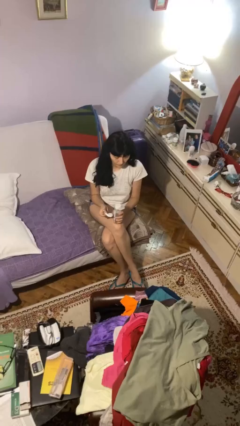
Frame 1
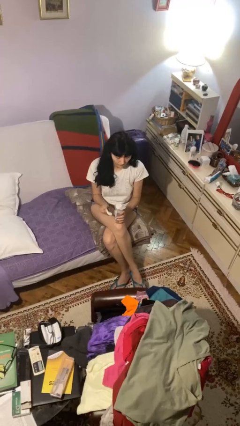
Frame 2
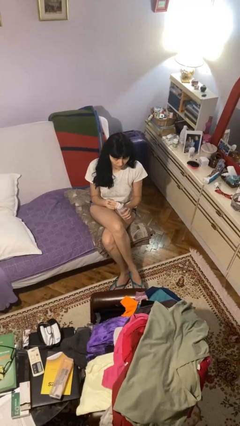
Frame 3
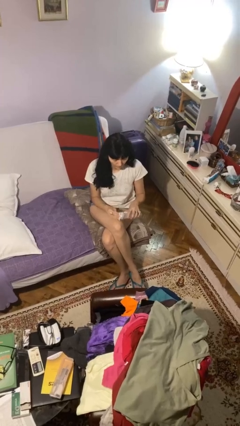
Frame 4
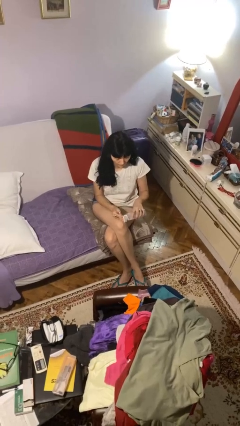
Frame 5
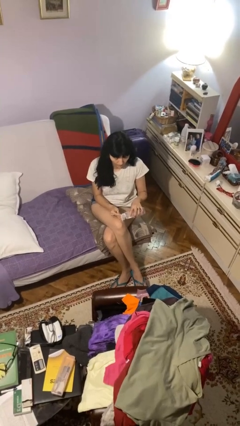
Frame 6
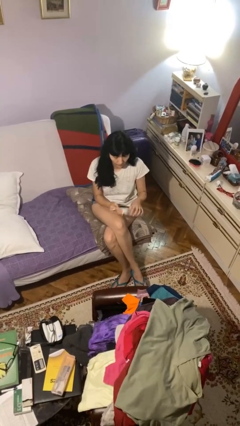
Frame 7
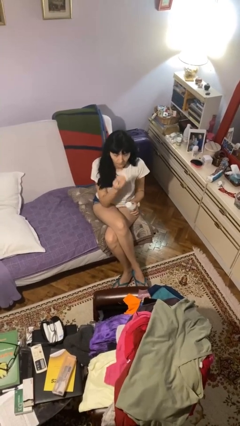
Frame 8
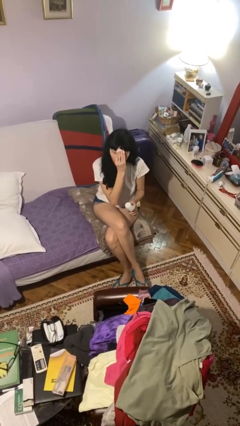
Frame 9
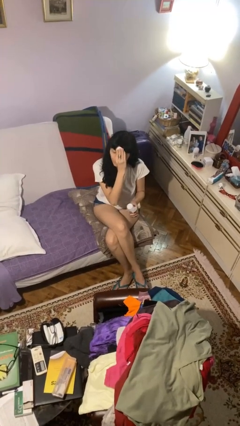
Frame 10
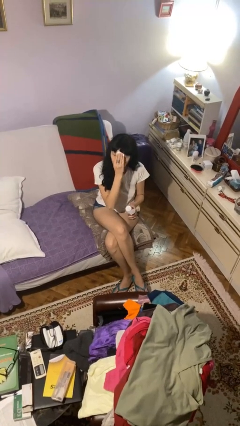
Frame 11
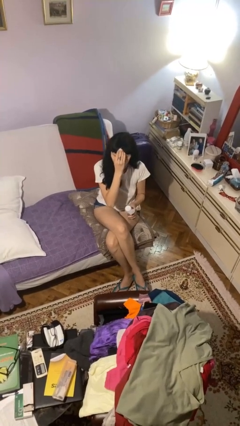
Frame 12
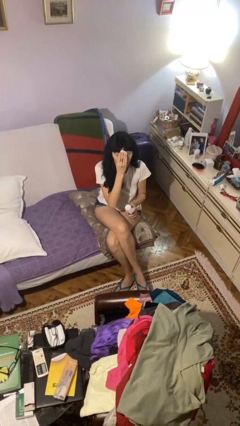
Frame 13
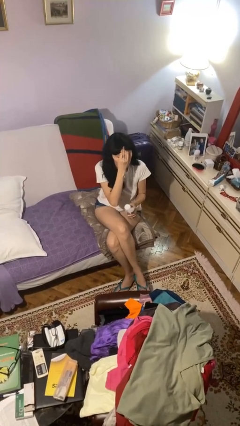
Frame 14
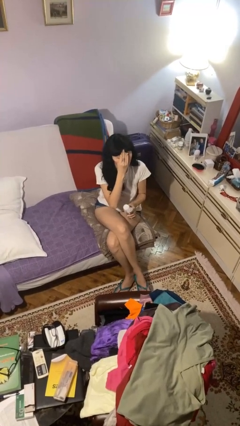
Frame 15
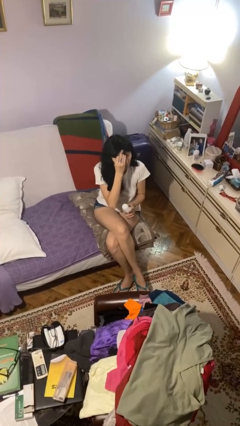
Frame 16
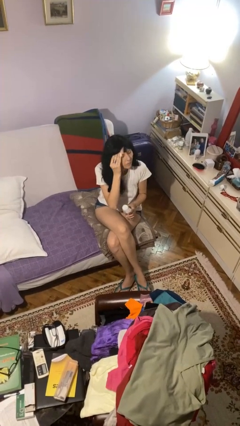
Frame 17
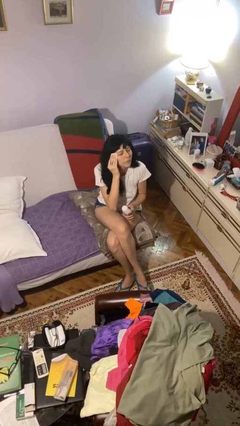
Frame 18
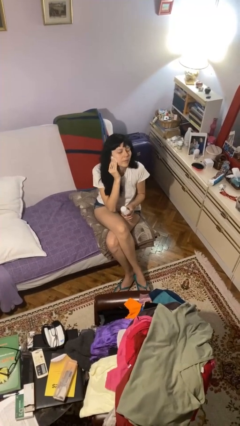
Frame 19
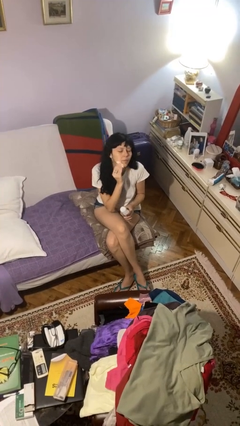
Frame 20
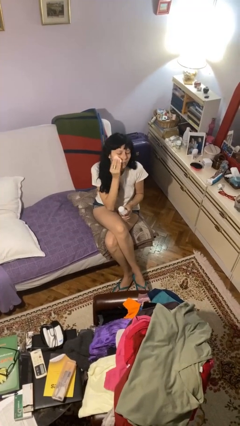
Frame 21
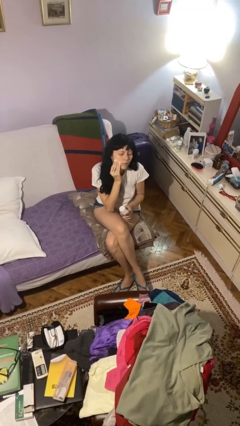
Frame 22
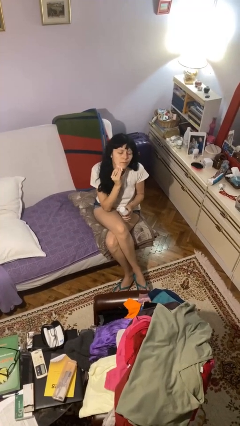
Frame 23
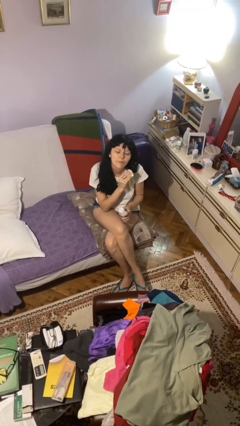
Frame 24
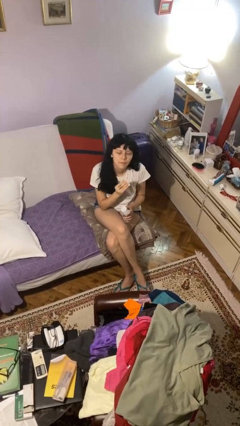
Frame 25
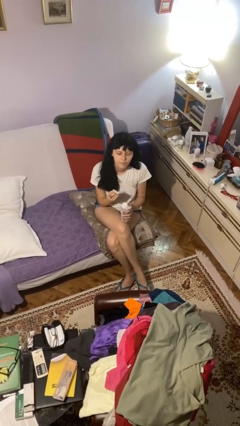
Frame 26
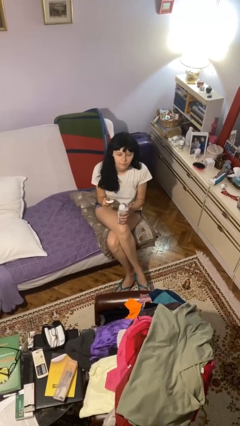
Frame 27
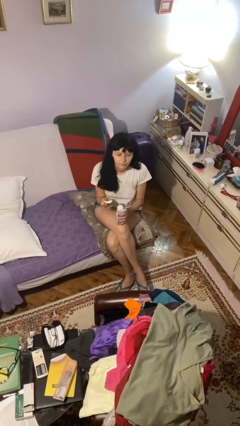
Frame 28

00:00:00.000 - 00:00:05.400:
person applies facial moisturizer

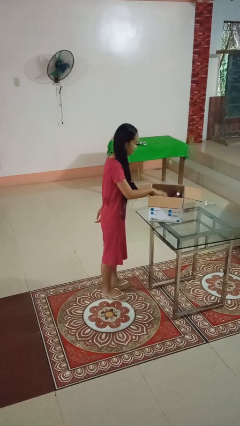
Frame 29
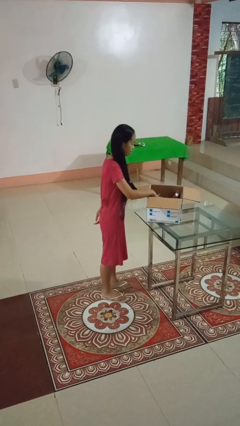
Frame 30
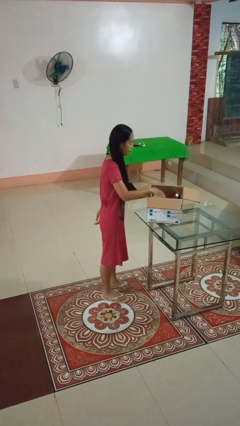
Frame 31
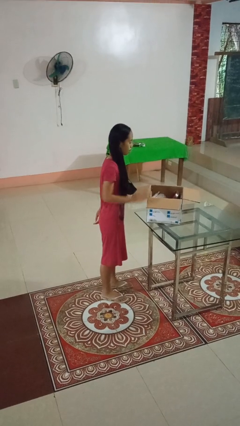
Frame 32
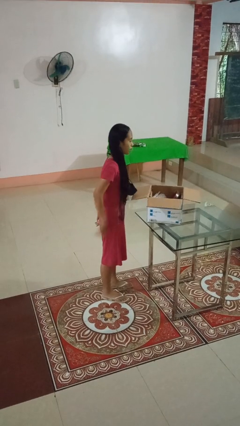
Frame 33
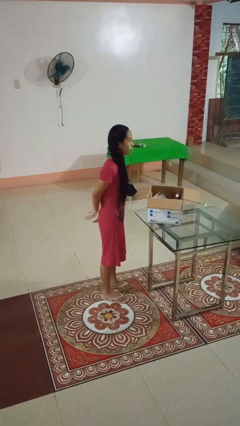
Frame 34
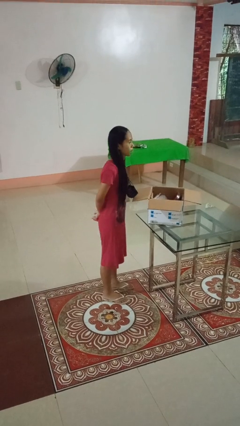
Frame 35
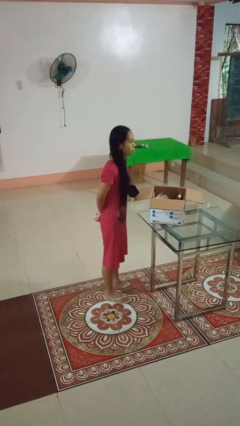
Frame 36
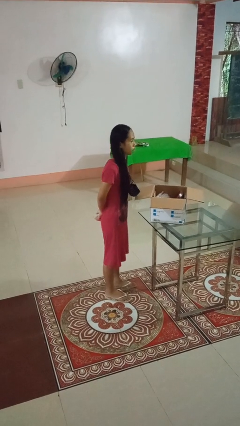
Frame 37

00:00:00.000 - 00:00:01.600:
person puts object into box

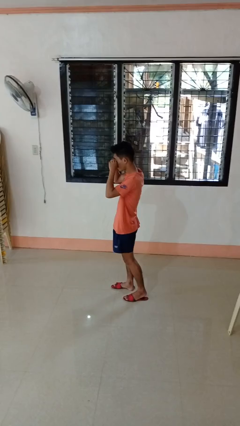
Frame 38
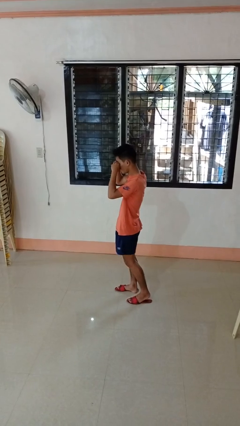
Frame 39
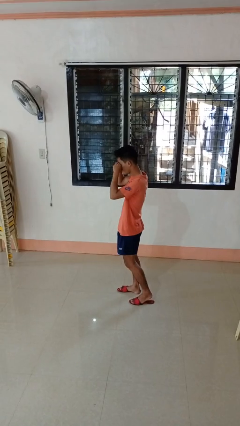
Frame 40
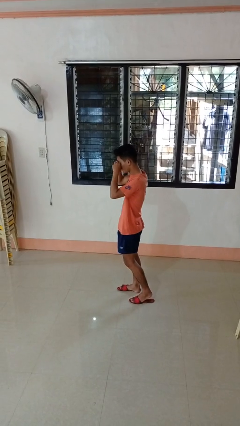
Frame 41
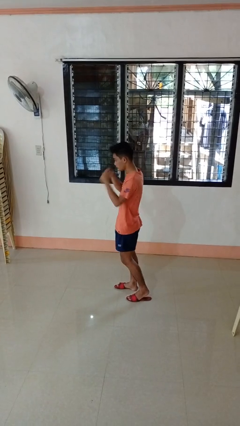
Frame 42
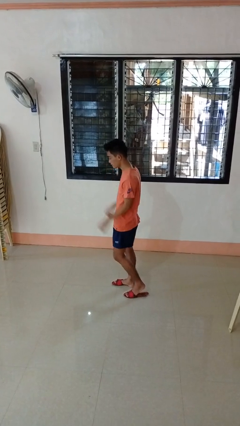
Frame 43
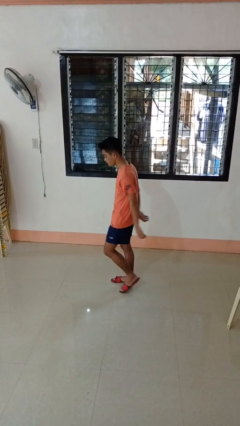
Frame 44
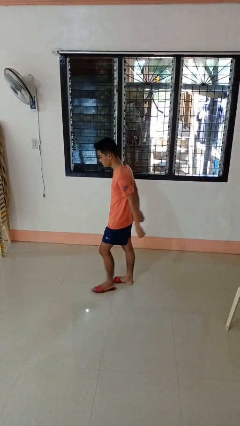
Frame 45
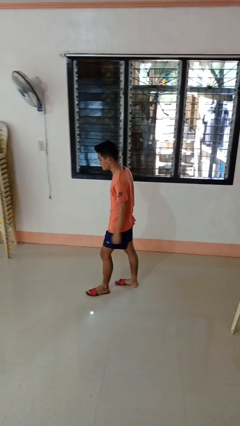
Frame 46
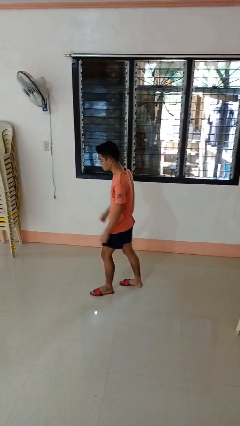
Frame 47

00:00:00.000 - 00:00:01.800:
person rubs eyes

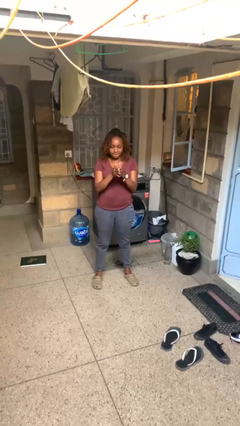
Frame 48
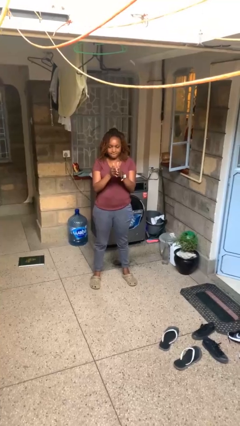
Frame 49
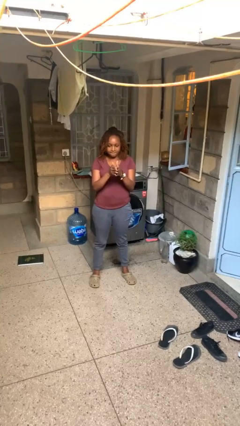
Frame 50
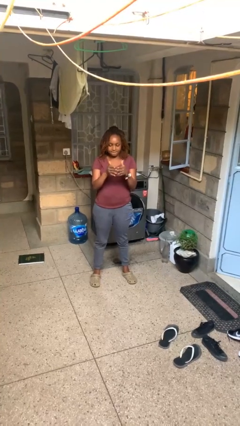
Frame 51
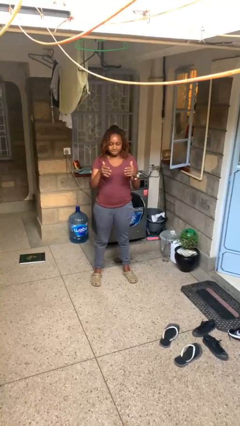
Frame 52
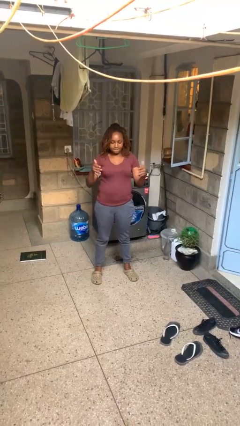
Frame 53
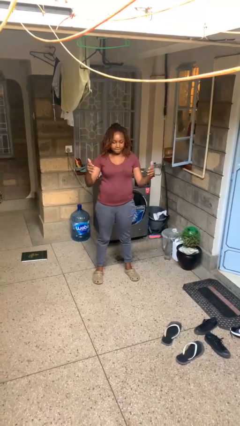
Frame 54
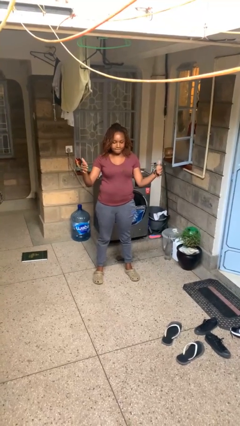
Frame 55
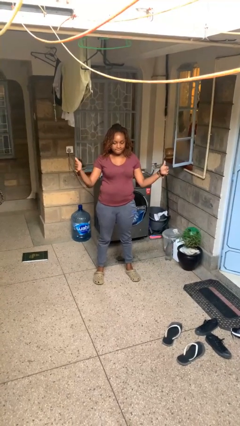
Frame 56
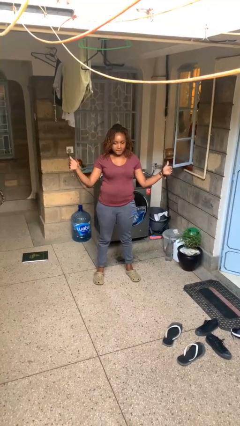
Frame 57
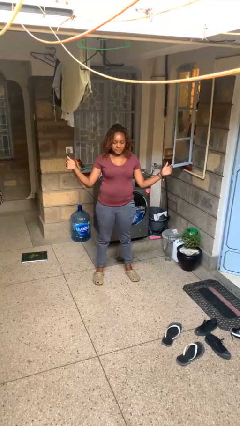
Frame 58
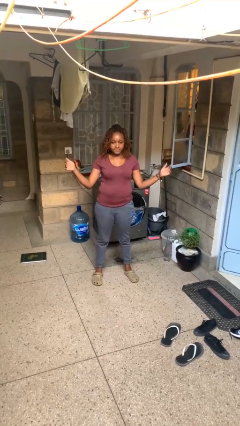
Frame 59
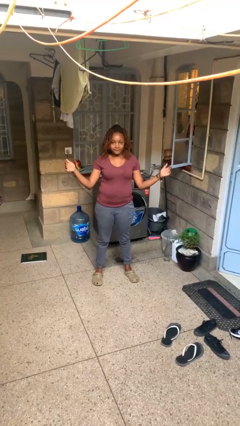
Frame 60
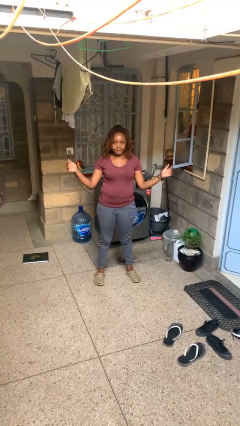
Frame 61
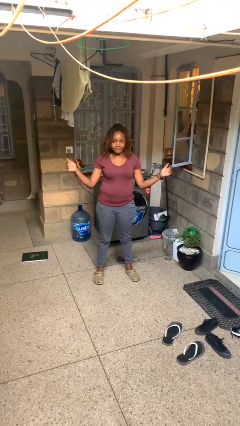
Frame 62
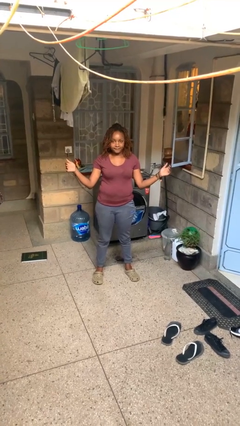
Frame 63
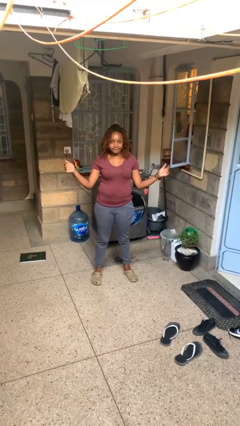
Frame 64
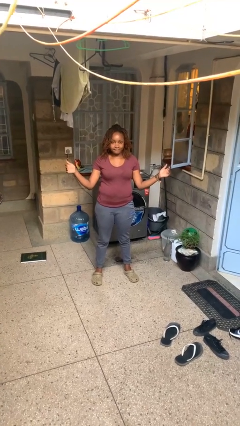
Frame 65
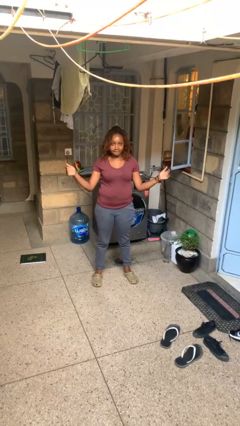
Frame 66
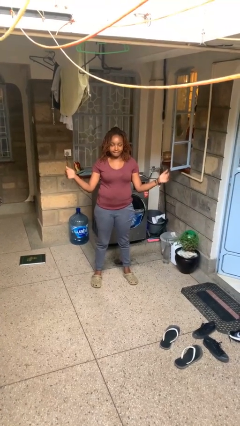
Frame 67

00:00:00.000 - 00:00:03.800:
person gestures zoom out

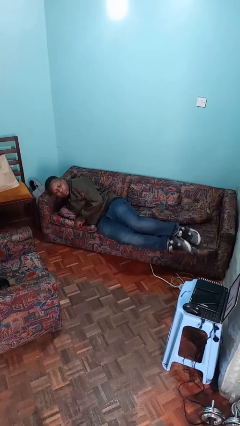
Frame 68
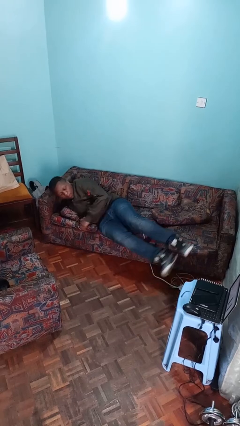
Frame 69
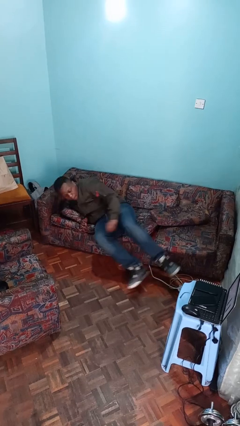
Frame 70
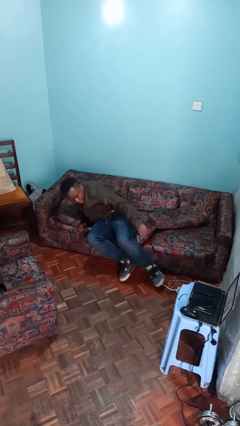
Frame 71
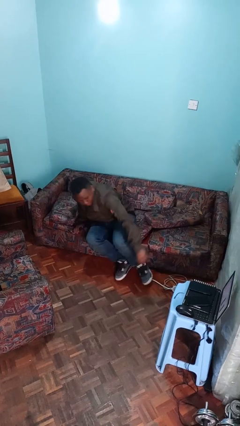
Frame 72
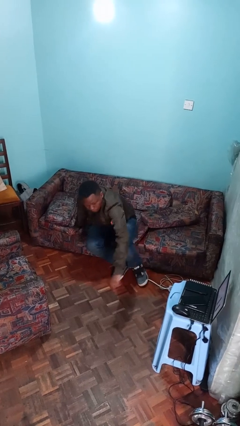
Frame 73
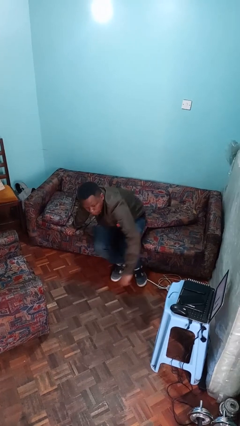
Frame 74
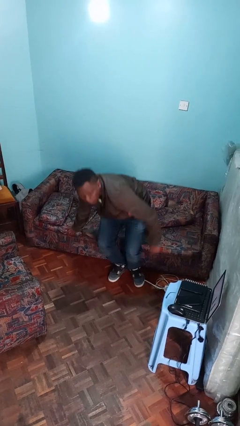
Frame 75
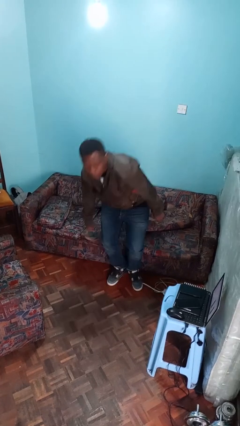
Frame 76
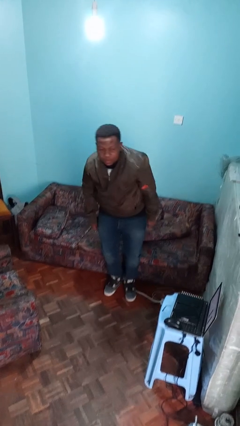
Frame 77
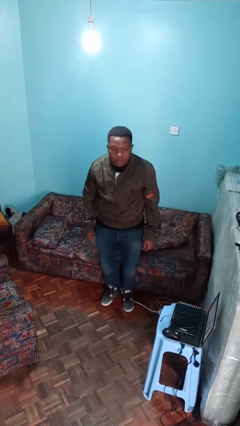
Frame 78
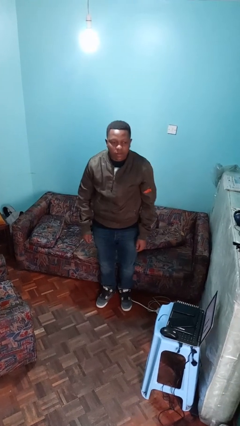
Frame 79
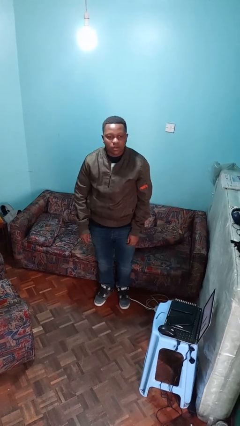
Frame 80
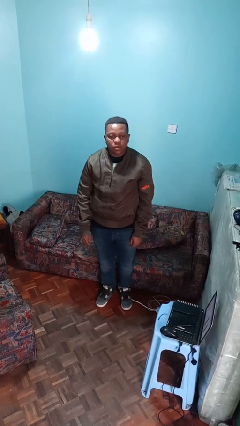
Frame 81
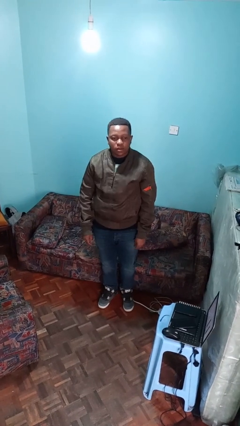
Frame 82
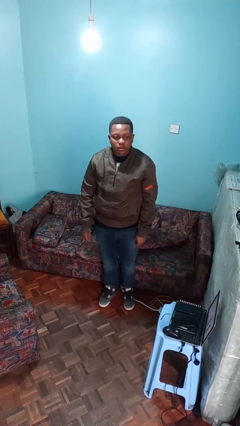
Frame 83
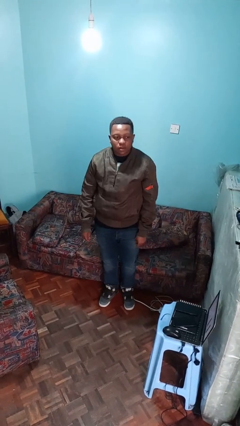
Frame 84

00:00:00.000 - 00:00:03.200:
person stands up

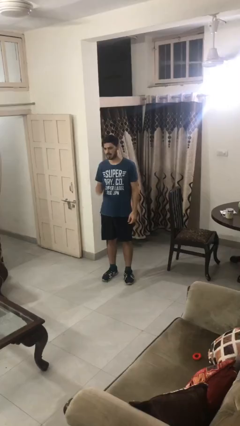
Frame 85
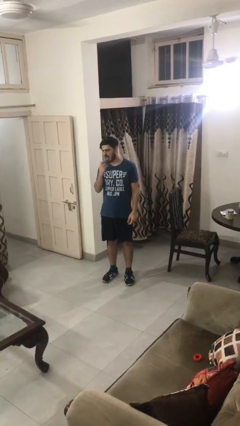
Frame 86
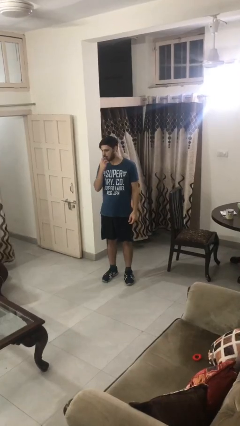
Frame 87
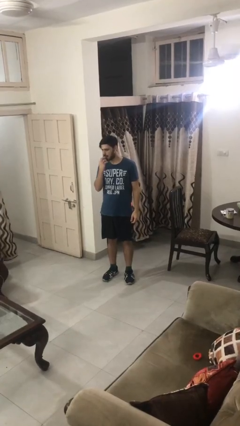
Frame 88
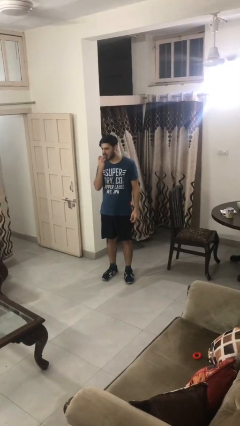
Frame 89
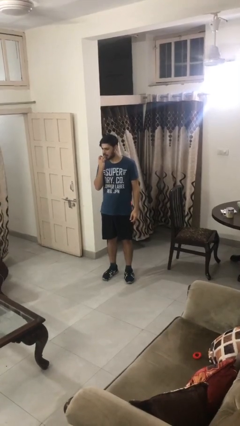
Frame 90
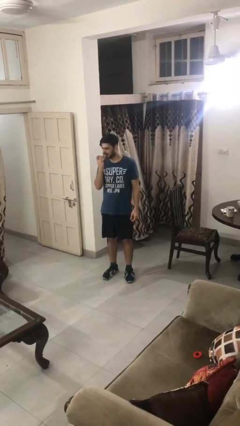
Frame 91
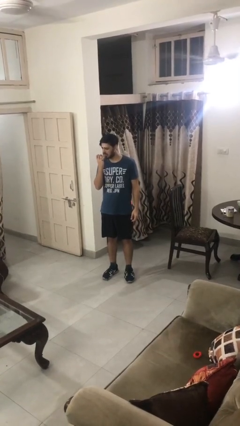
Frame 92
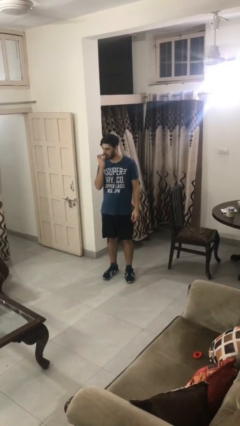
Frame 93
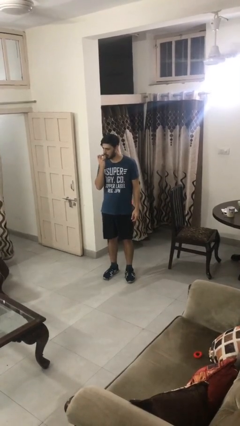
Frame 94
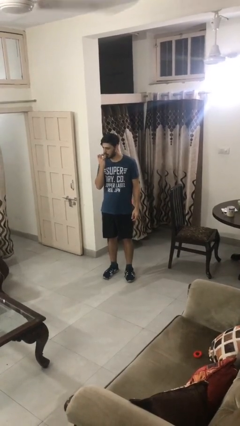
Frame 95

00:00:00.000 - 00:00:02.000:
person licks fingers
